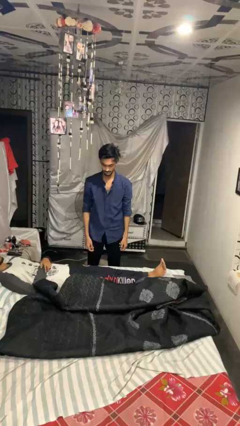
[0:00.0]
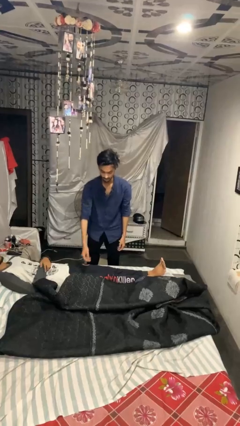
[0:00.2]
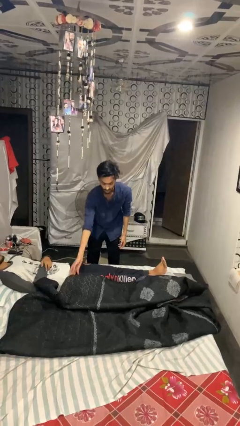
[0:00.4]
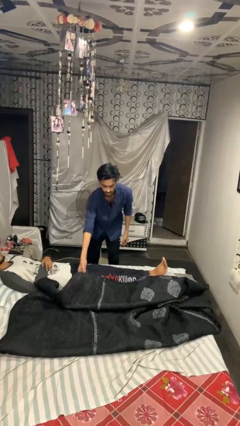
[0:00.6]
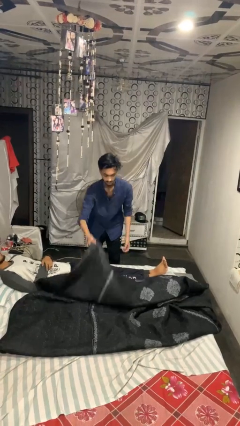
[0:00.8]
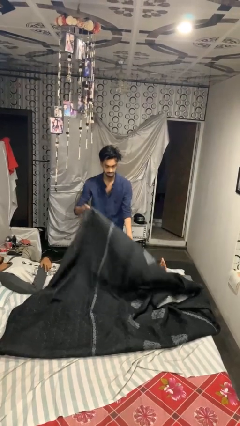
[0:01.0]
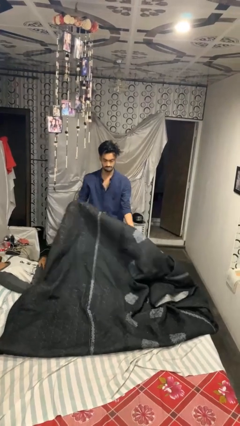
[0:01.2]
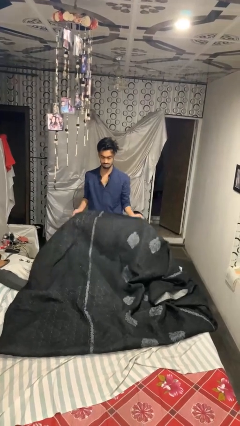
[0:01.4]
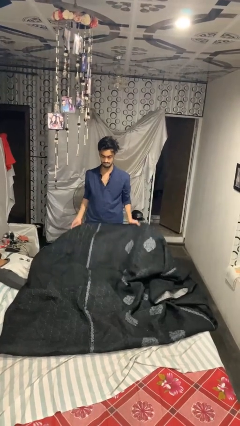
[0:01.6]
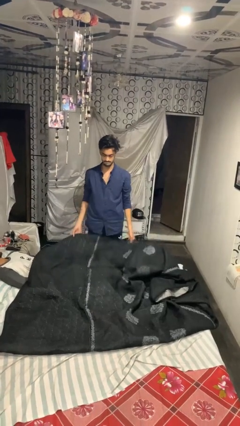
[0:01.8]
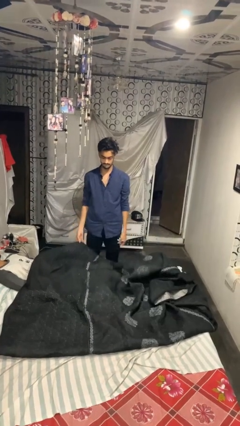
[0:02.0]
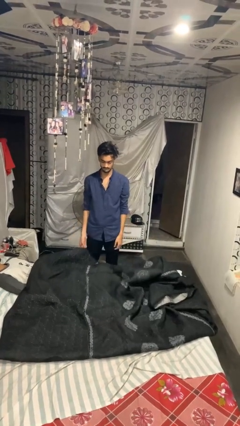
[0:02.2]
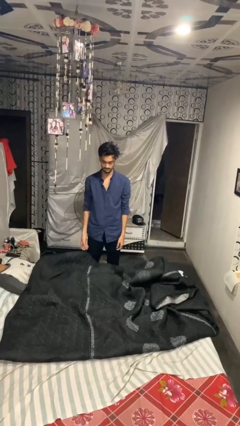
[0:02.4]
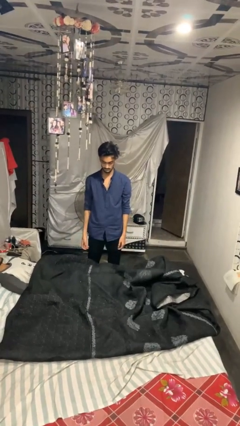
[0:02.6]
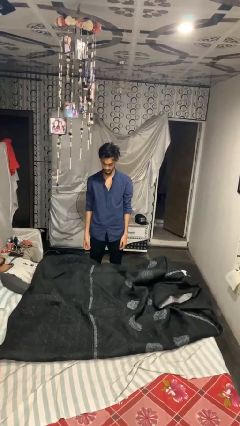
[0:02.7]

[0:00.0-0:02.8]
person covers friend with blanket

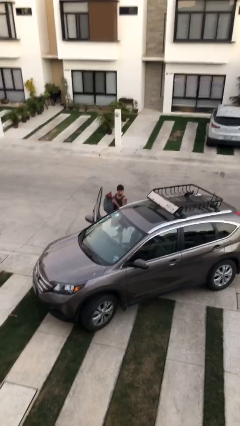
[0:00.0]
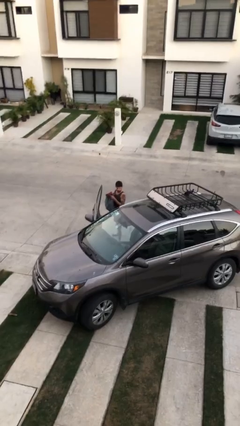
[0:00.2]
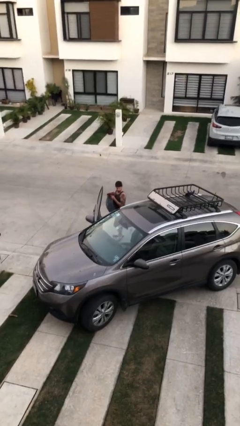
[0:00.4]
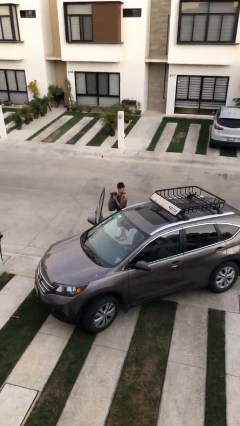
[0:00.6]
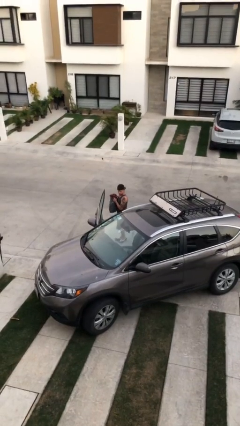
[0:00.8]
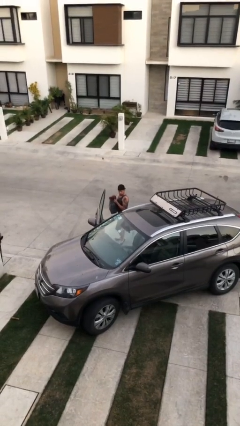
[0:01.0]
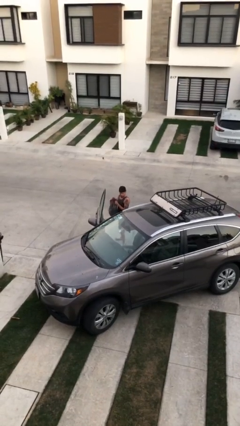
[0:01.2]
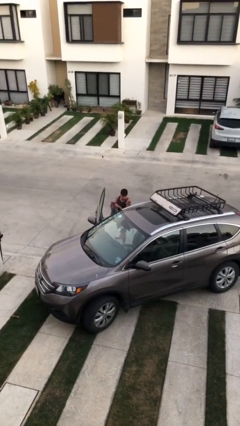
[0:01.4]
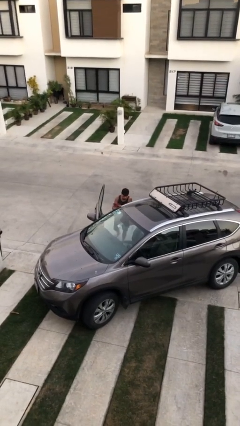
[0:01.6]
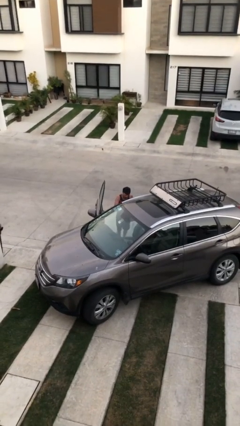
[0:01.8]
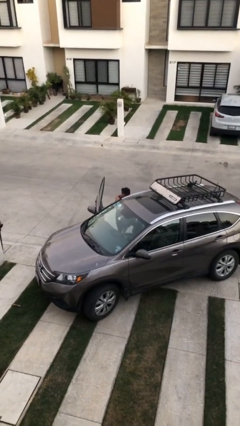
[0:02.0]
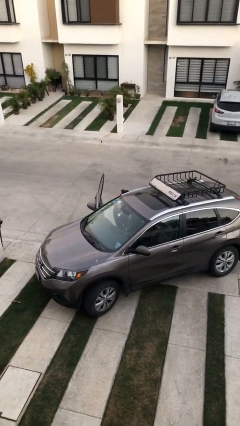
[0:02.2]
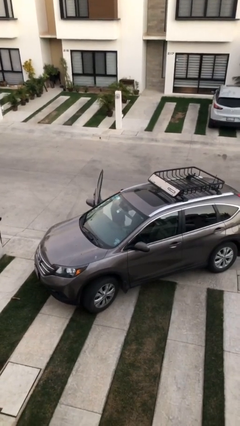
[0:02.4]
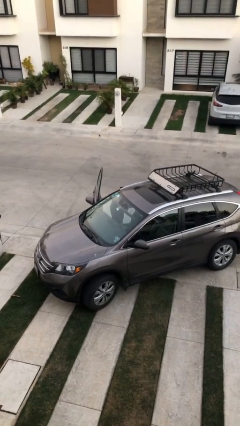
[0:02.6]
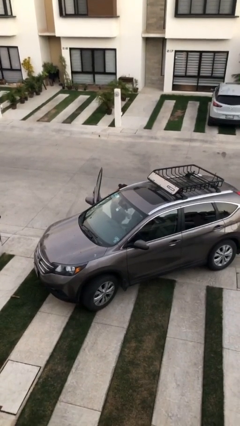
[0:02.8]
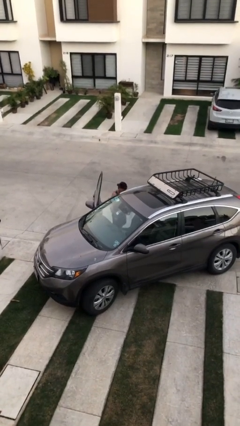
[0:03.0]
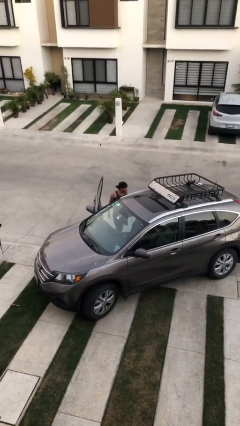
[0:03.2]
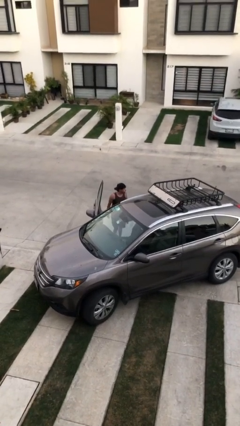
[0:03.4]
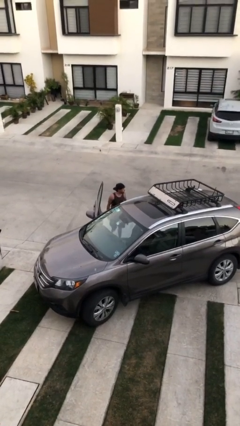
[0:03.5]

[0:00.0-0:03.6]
person loads car

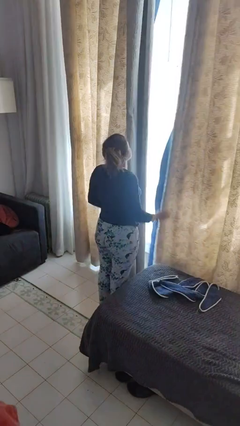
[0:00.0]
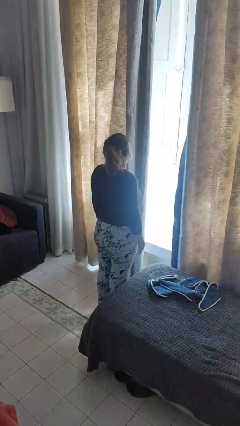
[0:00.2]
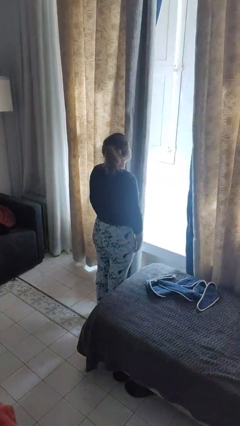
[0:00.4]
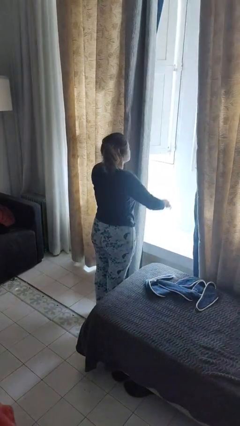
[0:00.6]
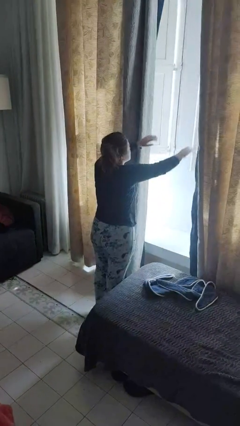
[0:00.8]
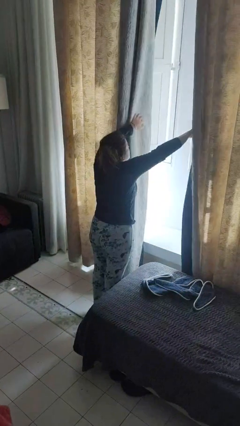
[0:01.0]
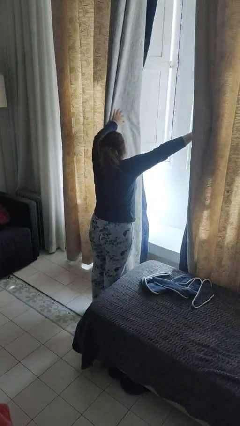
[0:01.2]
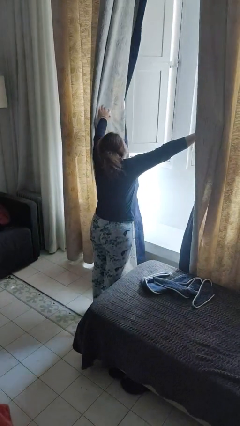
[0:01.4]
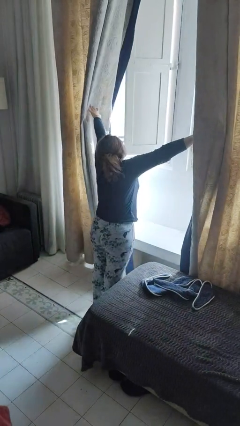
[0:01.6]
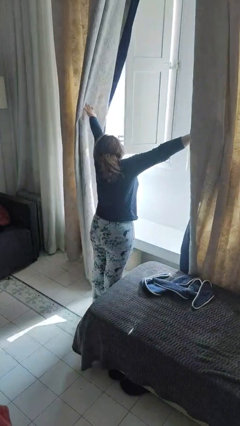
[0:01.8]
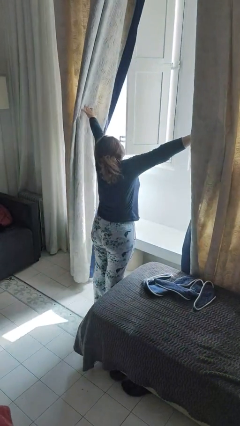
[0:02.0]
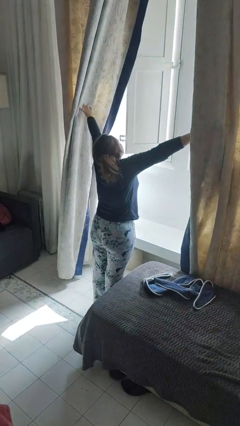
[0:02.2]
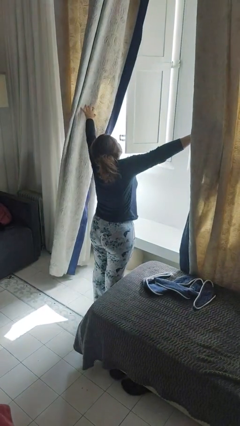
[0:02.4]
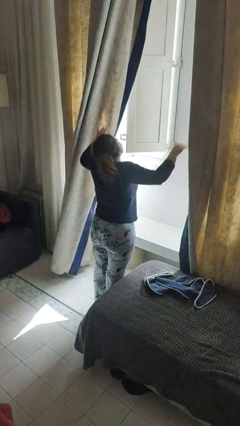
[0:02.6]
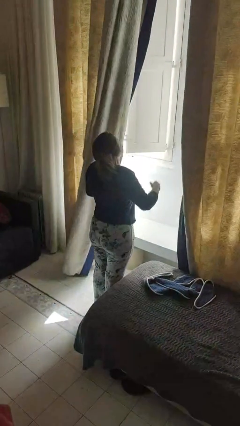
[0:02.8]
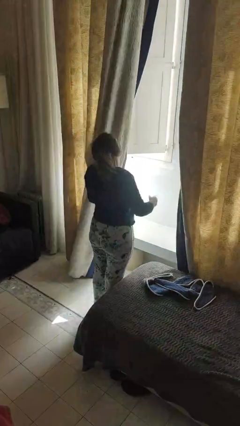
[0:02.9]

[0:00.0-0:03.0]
person opens curtains

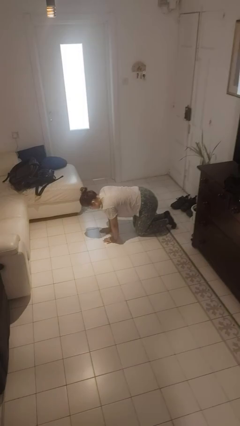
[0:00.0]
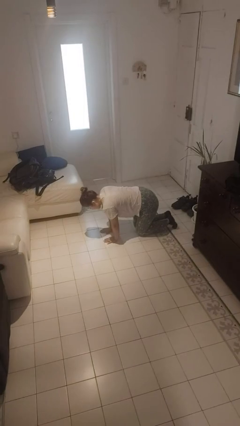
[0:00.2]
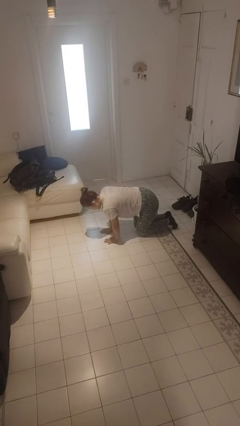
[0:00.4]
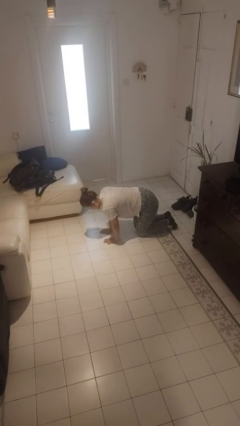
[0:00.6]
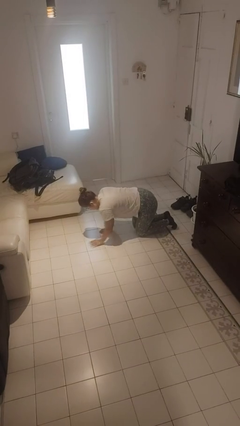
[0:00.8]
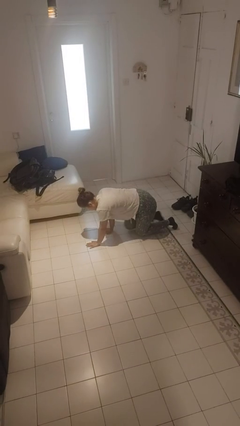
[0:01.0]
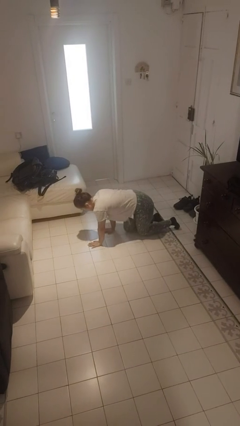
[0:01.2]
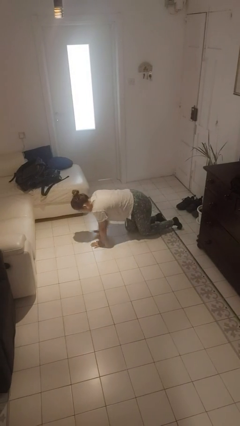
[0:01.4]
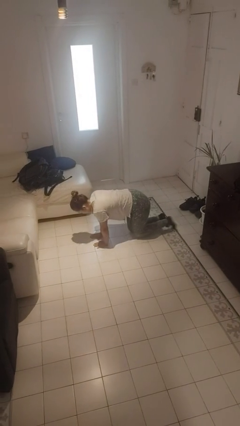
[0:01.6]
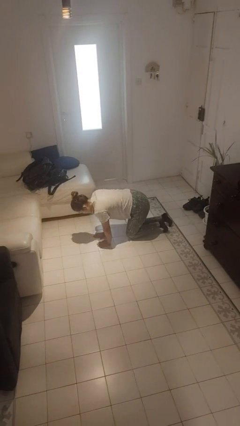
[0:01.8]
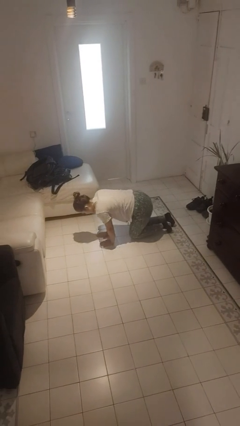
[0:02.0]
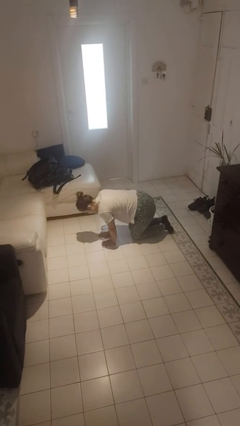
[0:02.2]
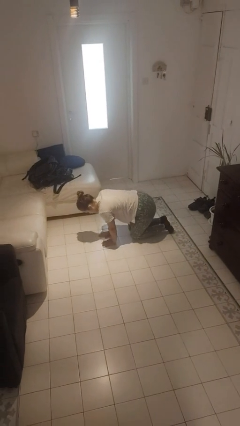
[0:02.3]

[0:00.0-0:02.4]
person crawls

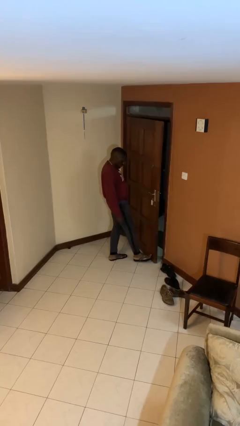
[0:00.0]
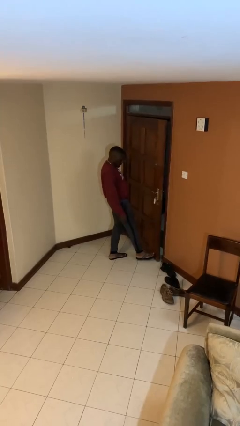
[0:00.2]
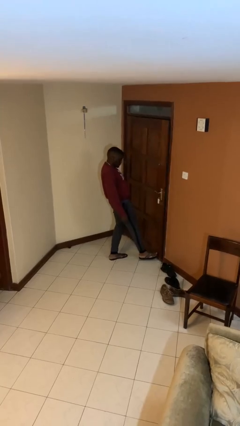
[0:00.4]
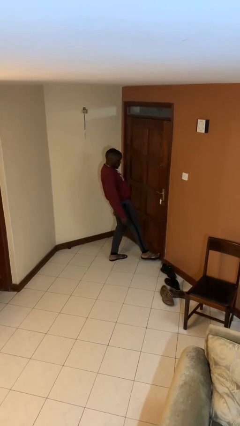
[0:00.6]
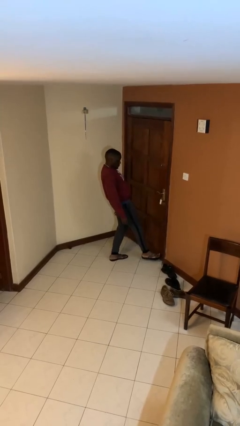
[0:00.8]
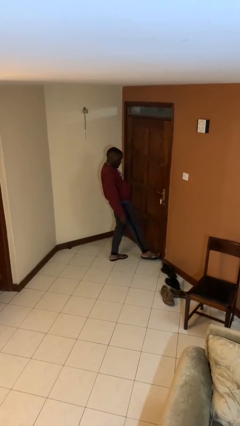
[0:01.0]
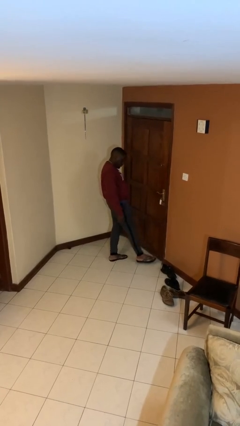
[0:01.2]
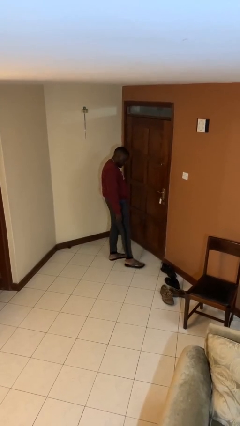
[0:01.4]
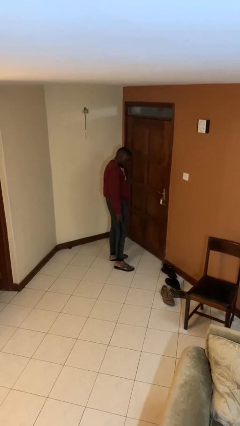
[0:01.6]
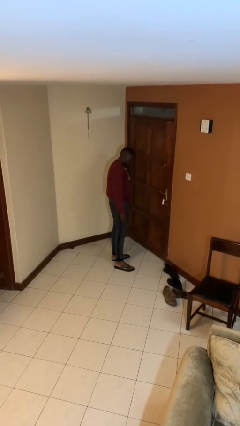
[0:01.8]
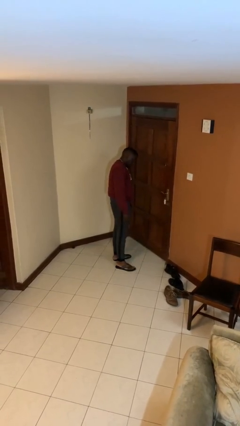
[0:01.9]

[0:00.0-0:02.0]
person closes door with foot

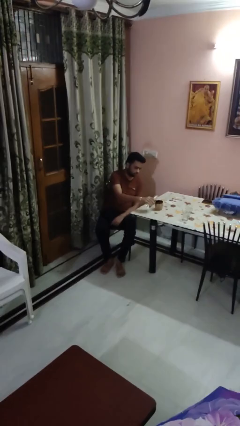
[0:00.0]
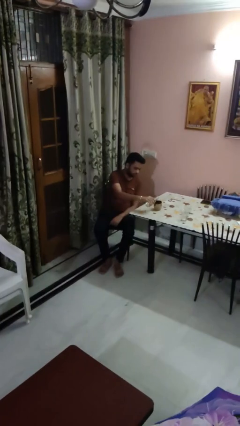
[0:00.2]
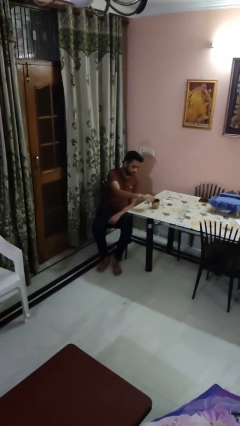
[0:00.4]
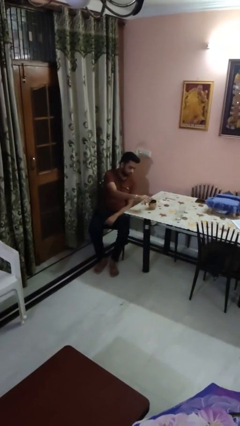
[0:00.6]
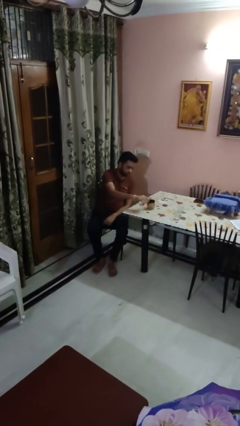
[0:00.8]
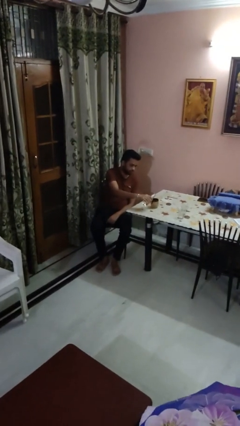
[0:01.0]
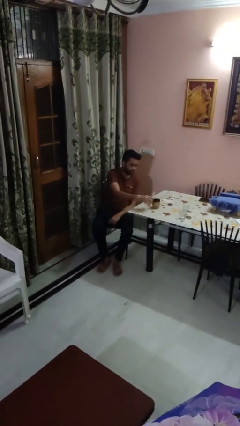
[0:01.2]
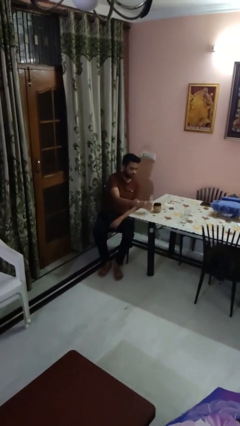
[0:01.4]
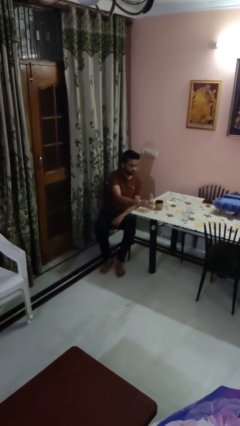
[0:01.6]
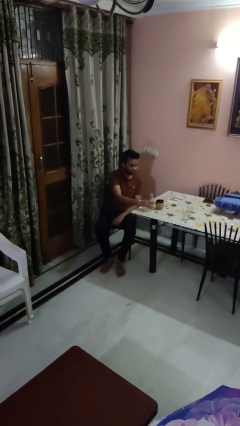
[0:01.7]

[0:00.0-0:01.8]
person pours liquid into cup

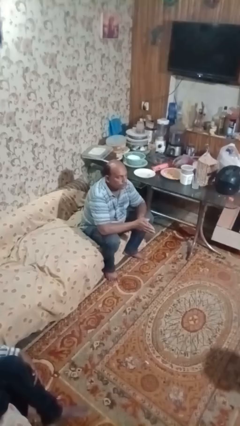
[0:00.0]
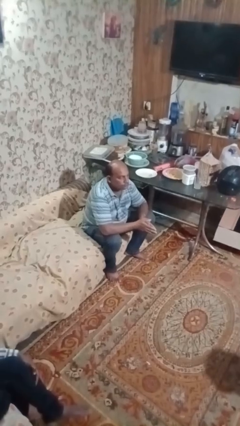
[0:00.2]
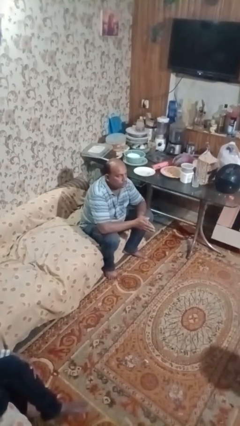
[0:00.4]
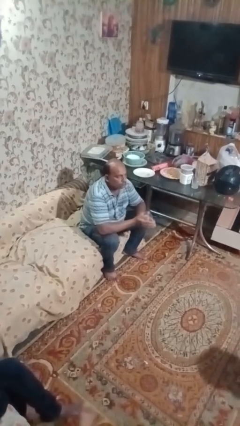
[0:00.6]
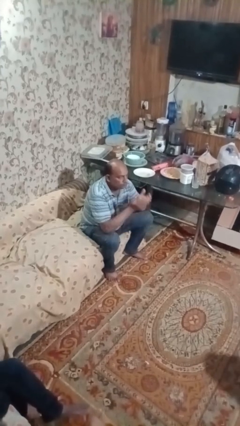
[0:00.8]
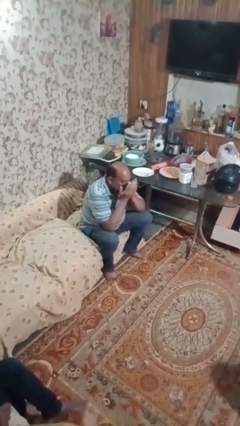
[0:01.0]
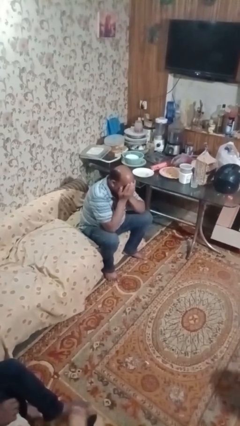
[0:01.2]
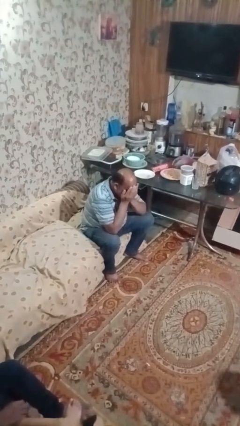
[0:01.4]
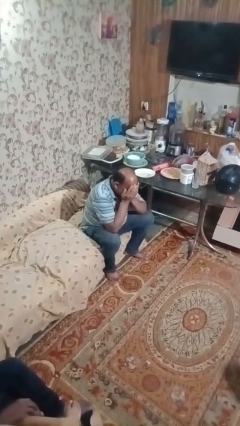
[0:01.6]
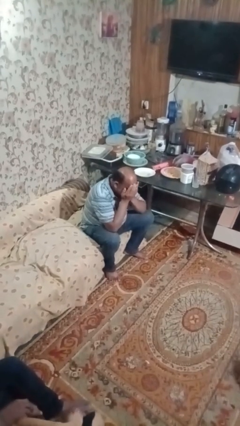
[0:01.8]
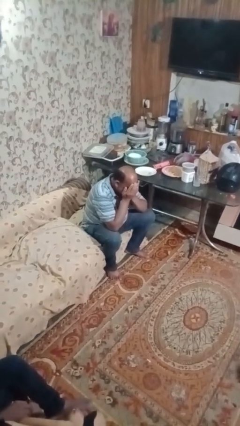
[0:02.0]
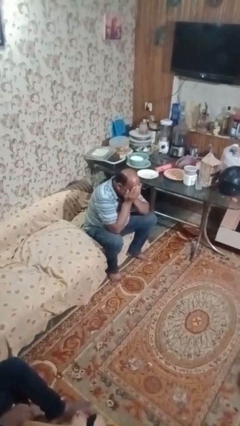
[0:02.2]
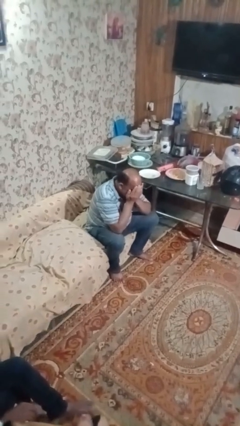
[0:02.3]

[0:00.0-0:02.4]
person covers face with hands
